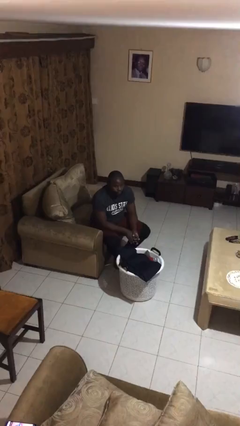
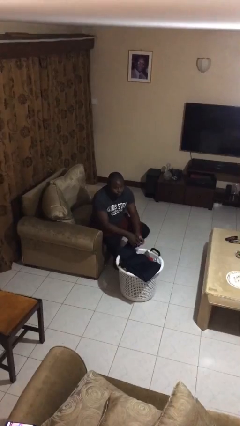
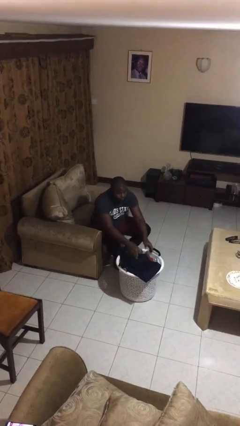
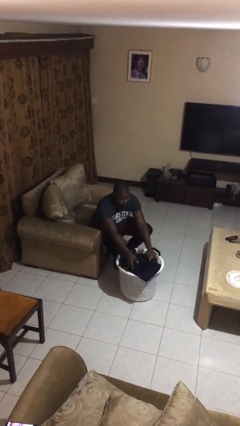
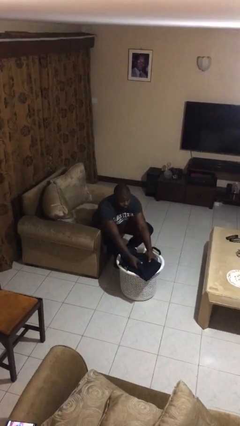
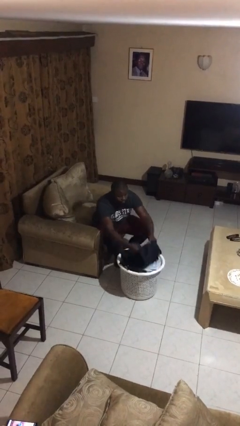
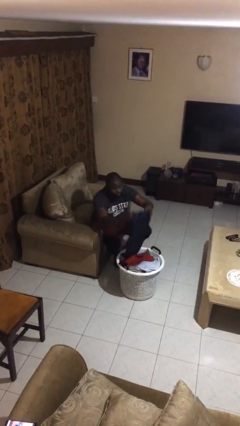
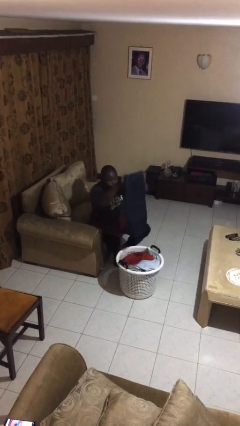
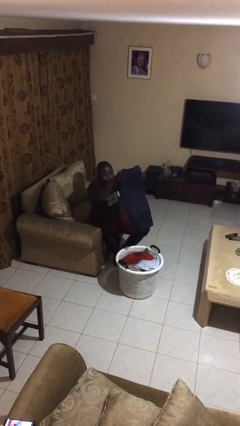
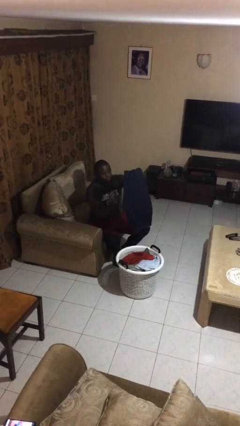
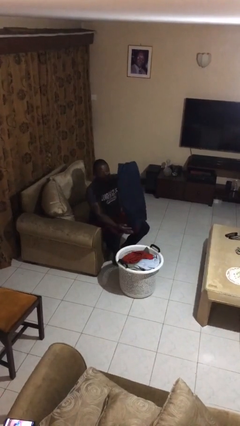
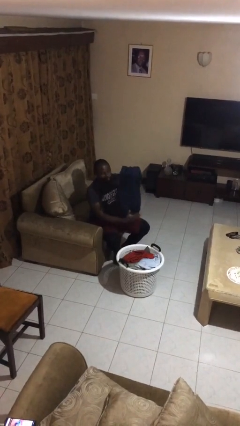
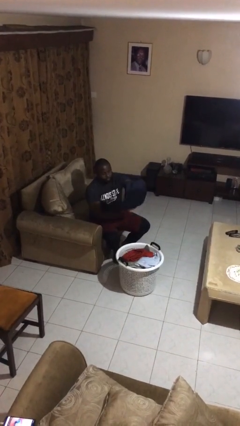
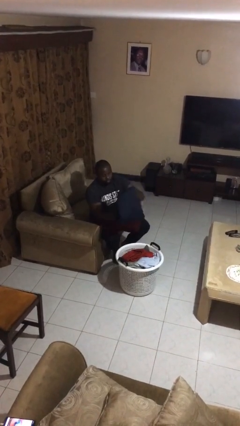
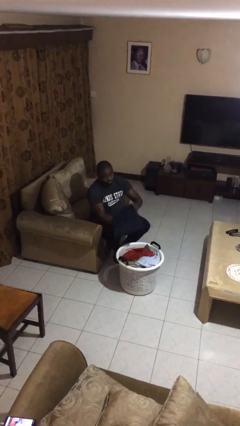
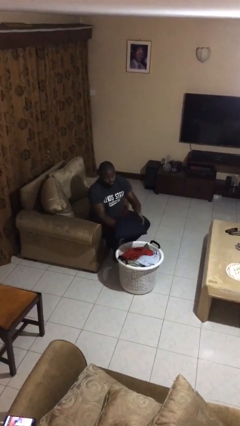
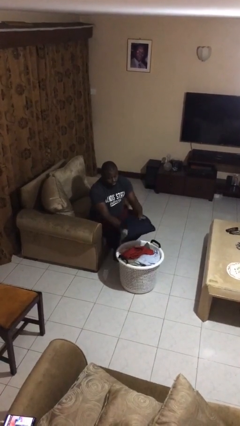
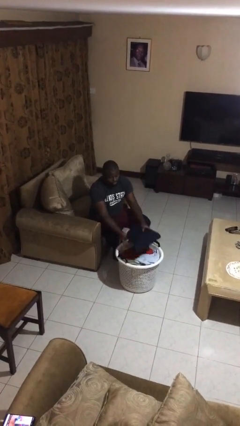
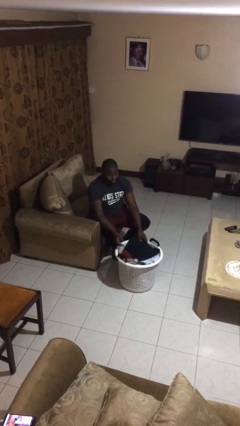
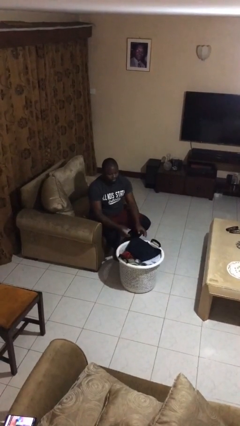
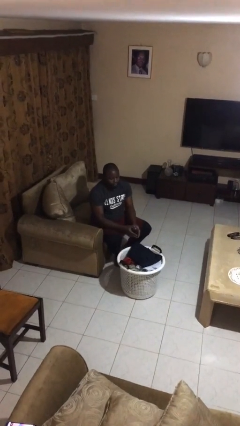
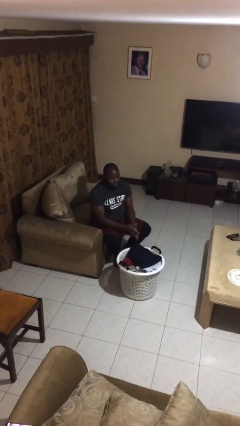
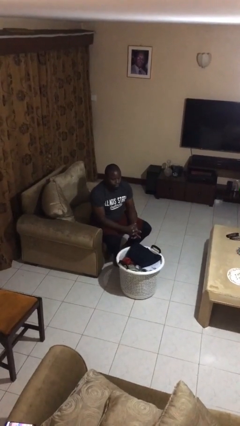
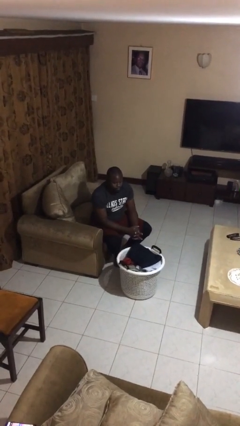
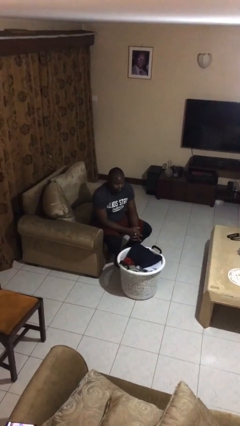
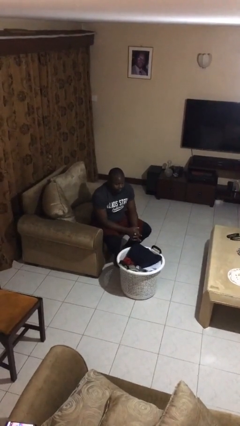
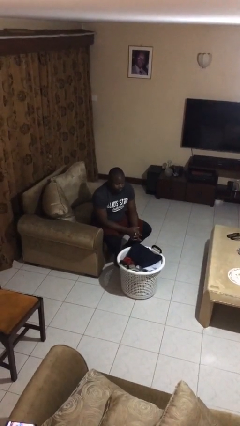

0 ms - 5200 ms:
person folds pants

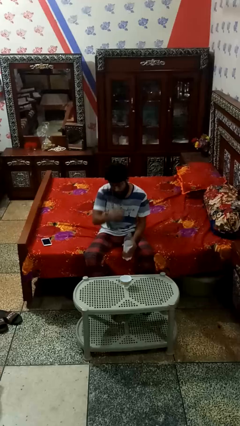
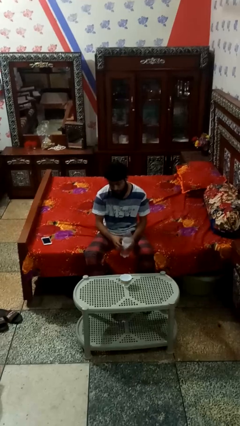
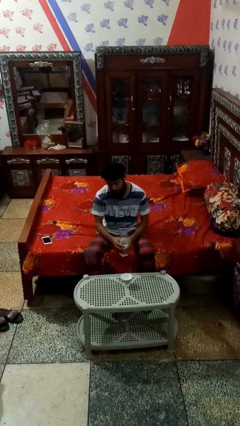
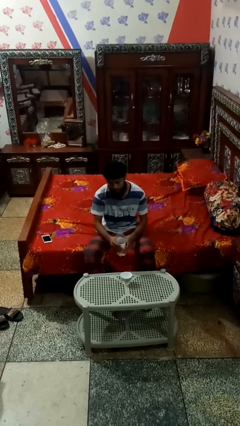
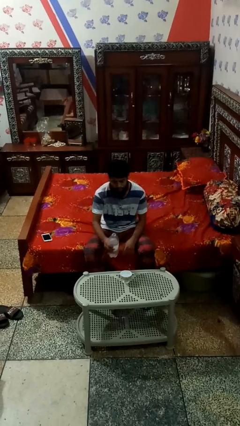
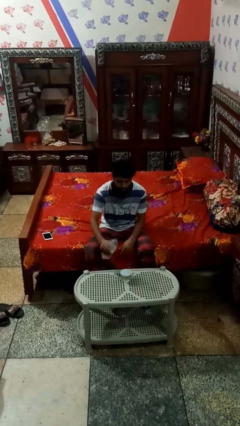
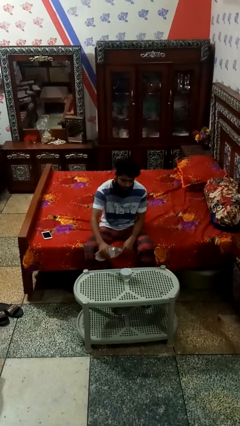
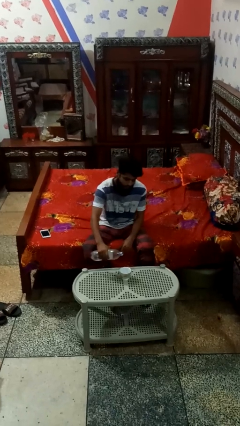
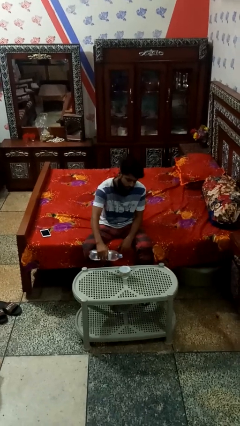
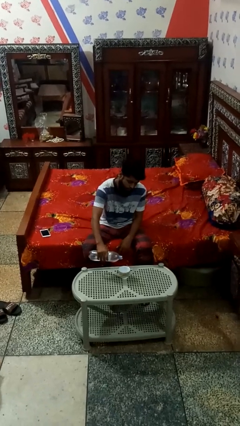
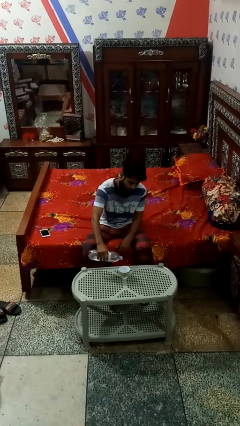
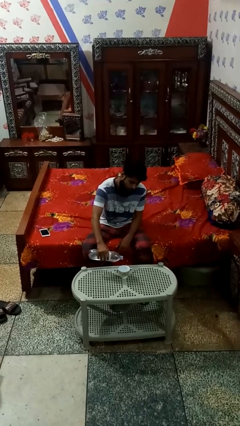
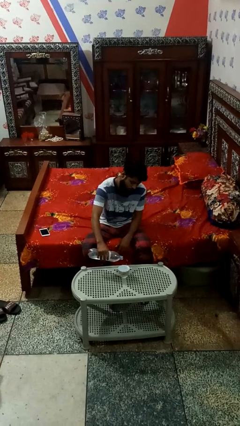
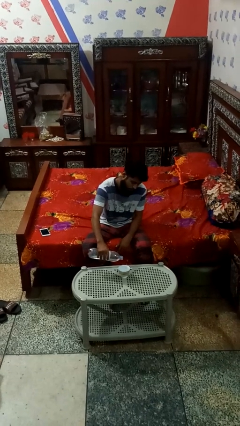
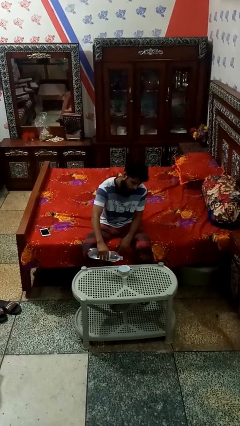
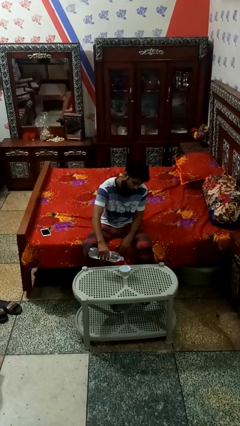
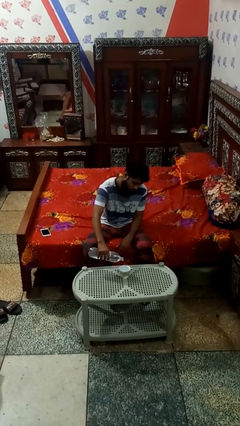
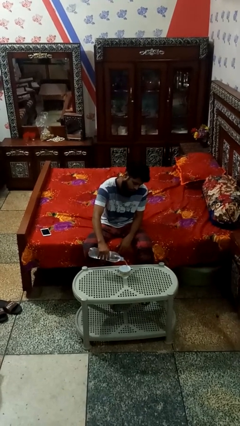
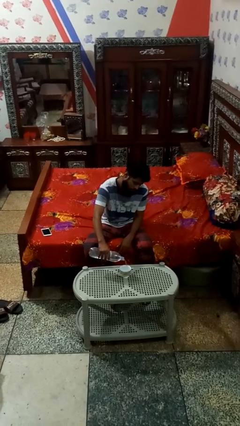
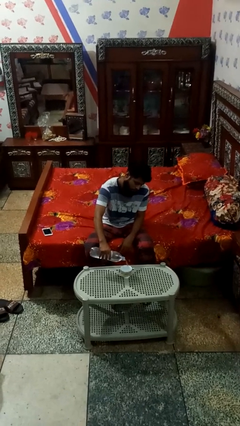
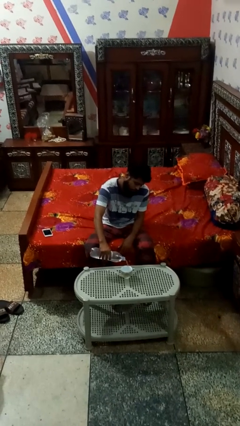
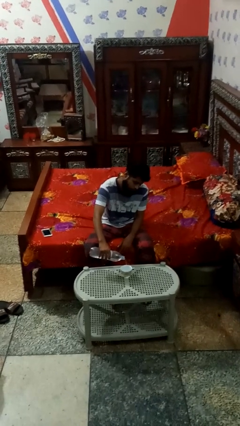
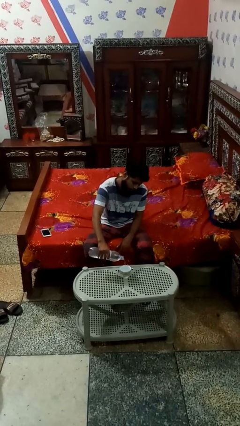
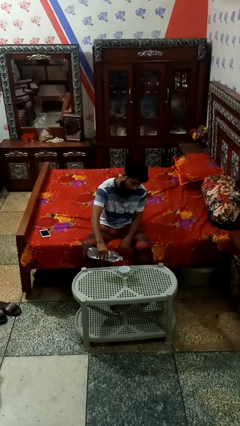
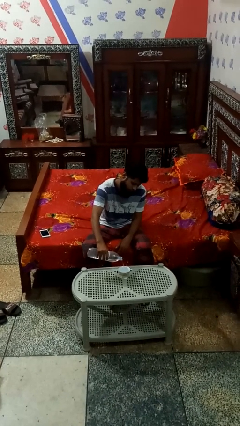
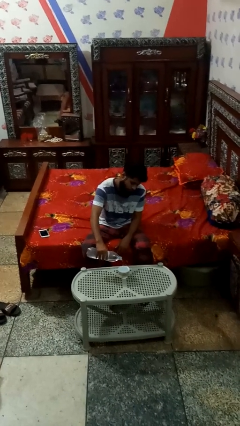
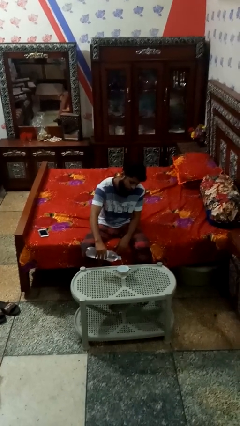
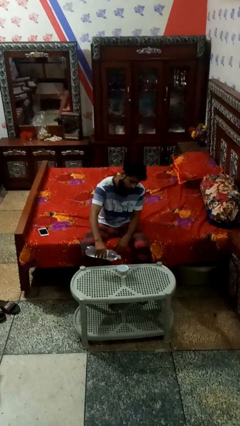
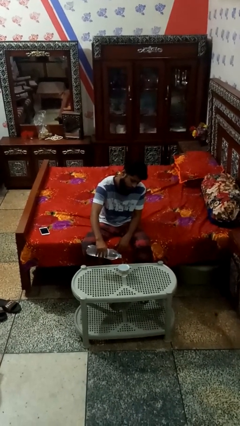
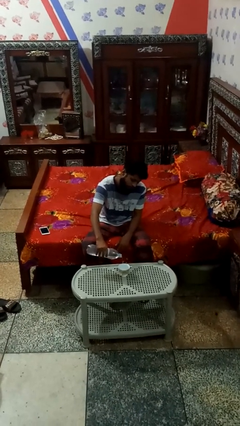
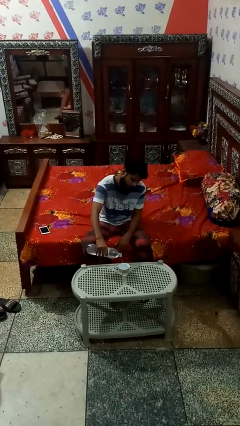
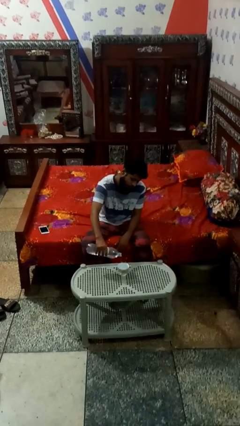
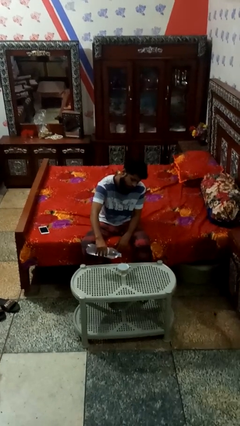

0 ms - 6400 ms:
person pours liquid into cup

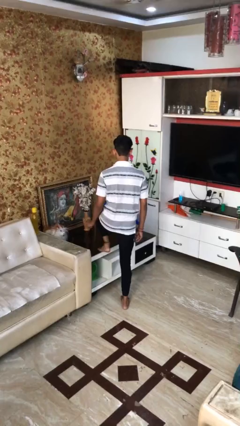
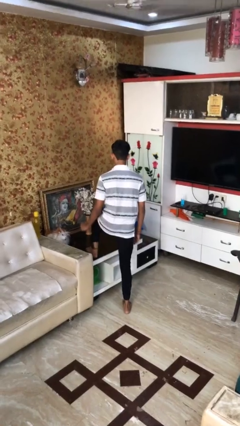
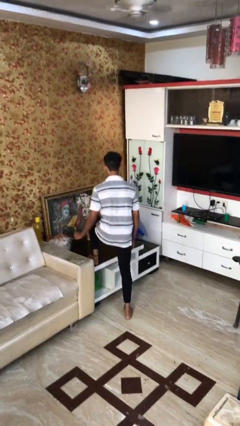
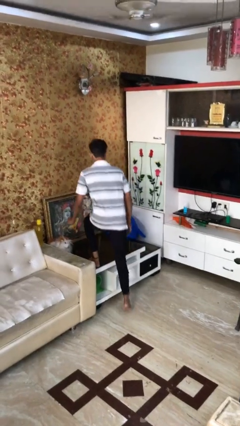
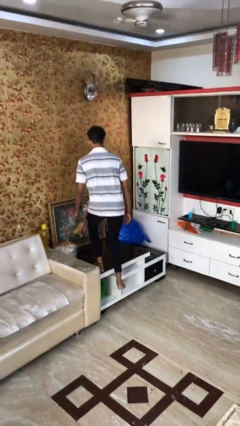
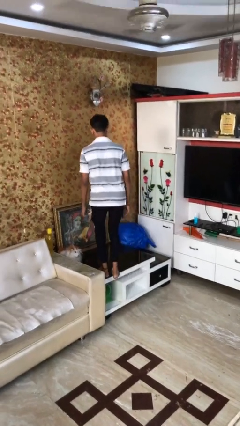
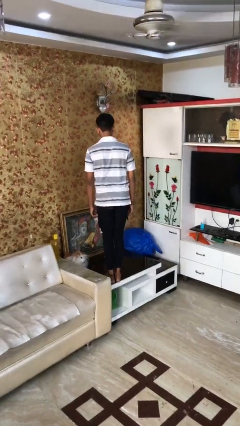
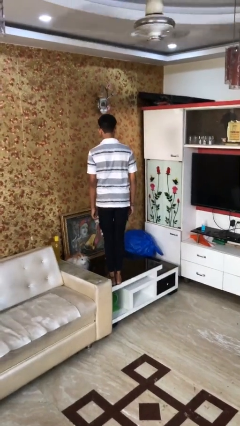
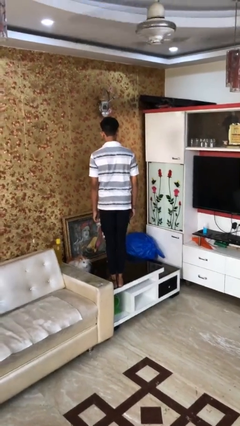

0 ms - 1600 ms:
person climbs on table

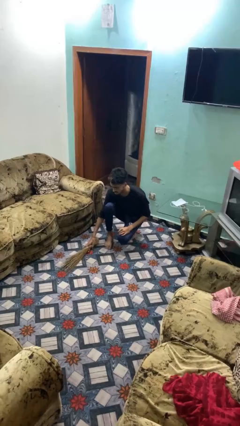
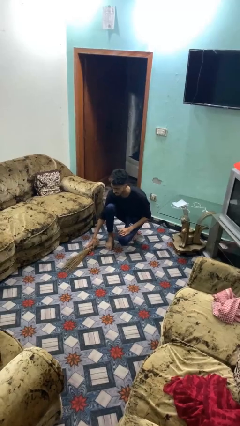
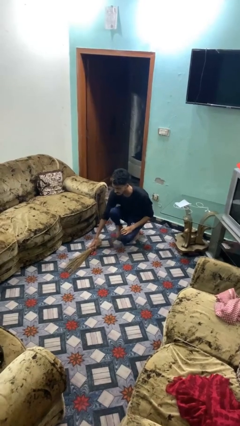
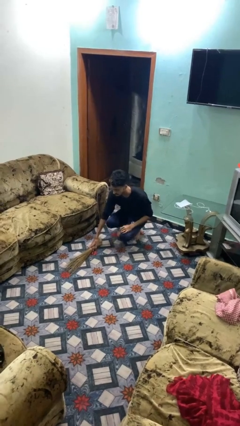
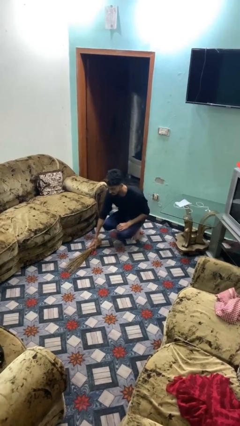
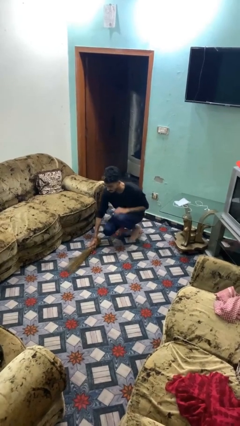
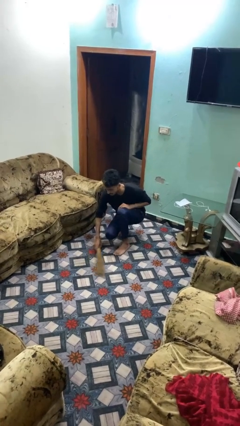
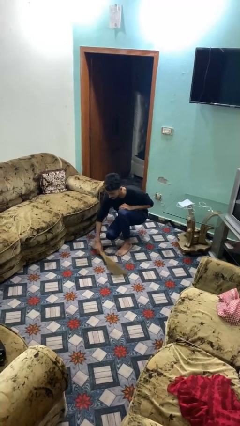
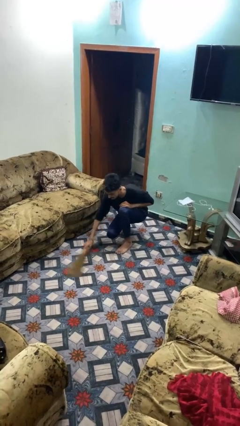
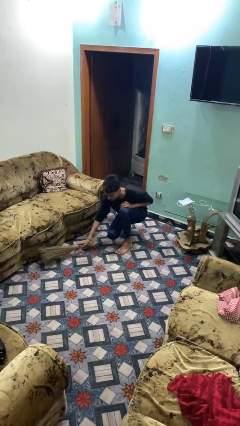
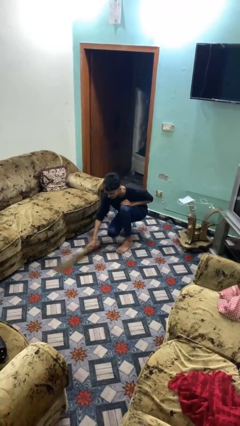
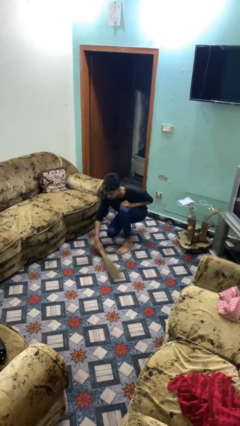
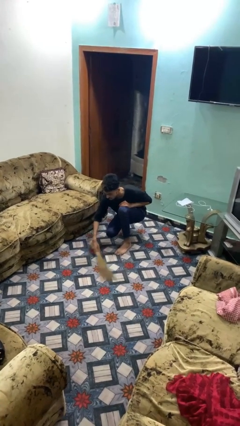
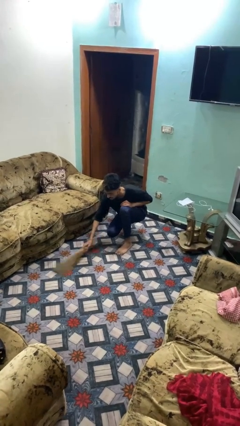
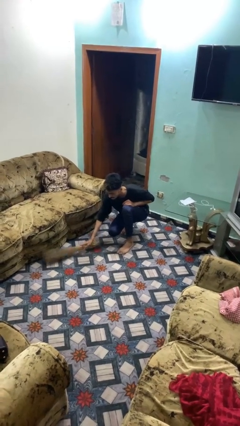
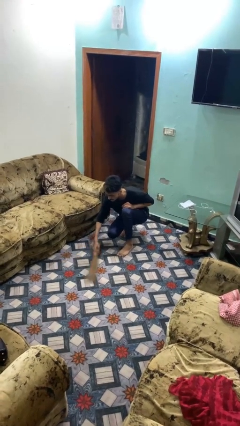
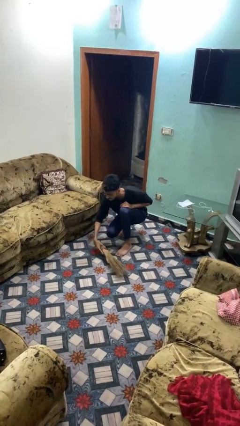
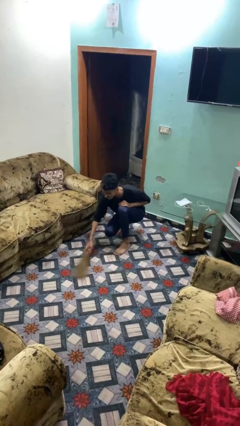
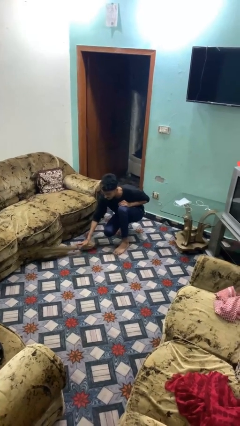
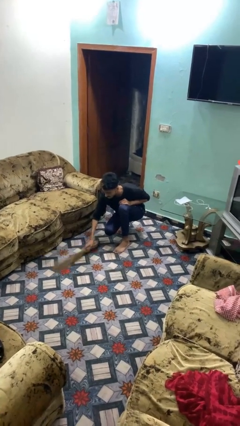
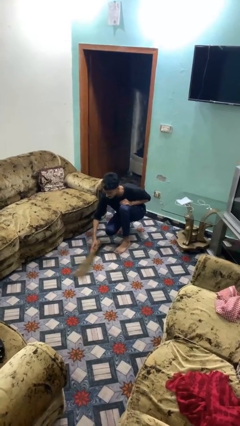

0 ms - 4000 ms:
person sweeps floor

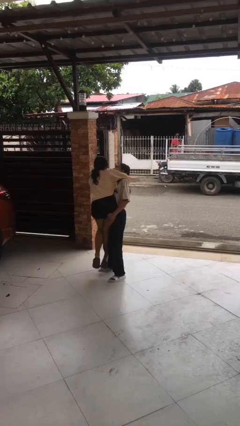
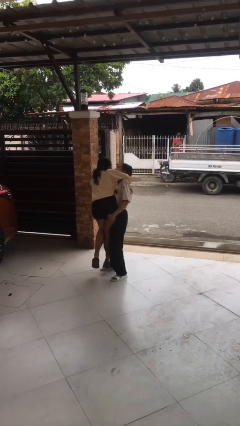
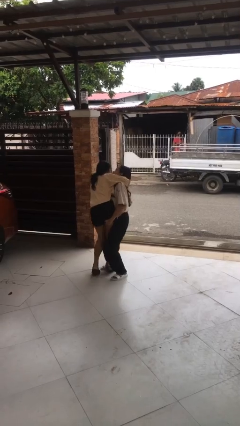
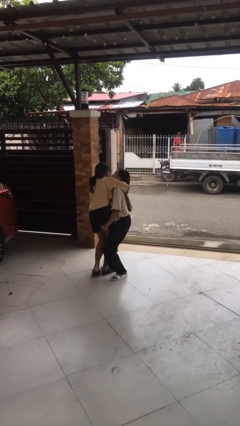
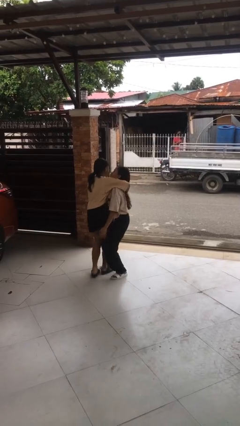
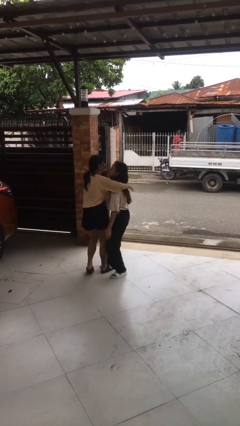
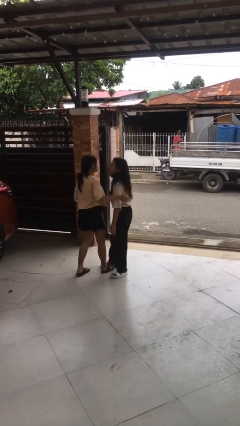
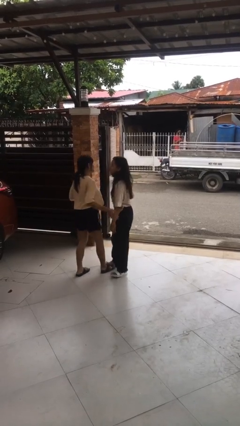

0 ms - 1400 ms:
person puts down person
